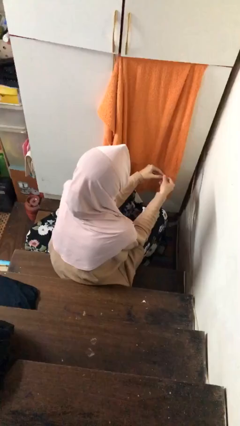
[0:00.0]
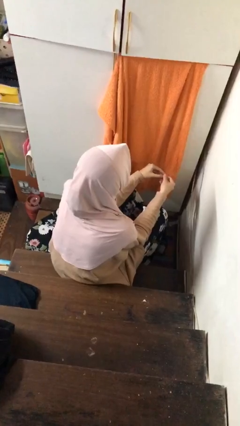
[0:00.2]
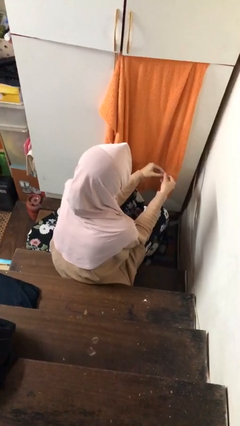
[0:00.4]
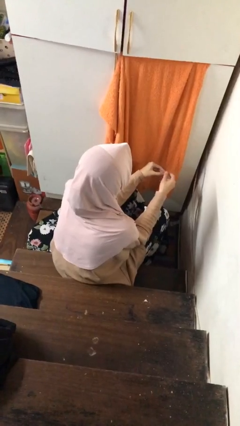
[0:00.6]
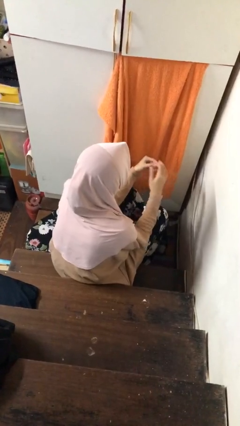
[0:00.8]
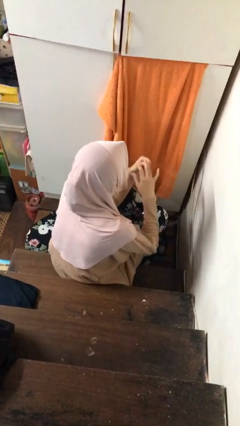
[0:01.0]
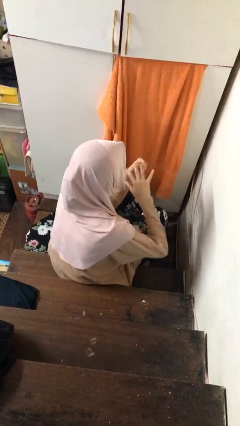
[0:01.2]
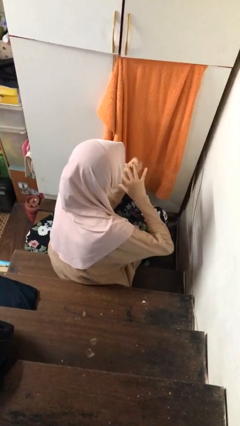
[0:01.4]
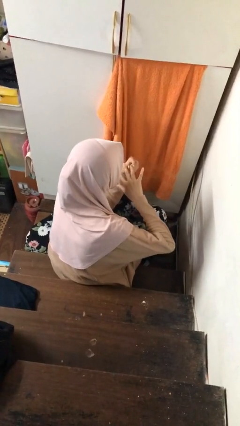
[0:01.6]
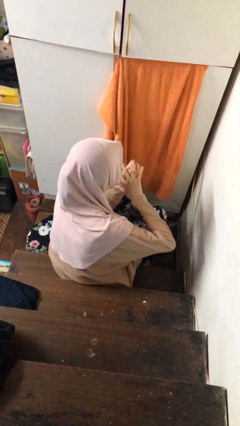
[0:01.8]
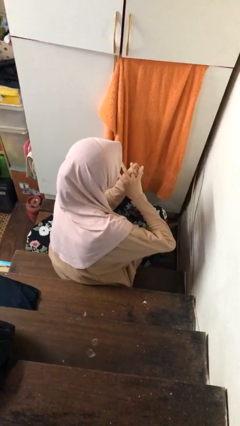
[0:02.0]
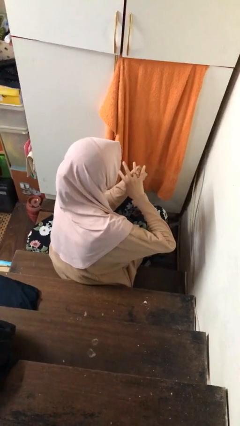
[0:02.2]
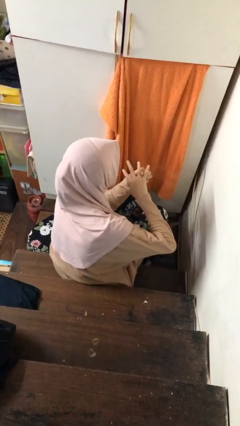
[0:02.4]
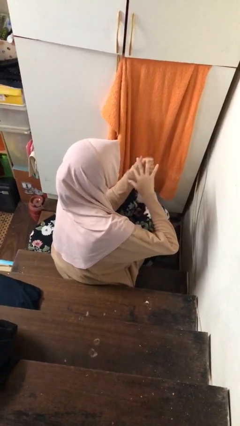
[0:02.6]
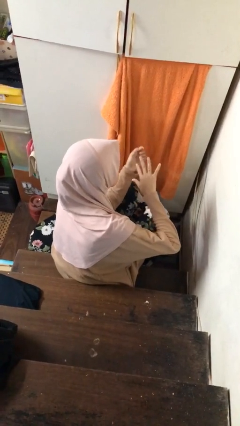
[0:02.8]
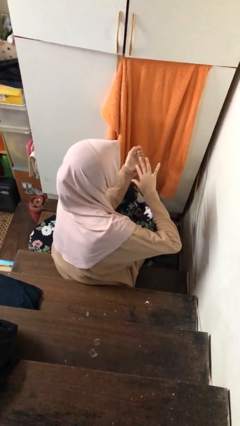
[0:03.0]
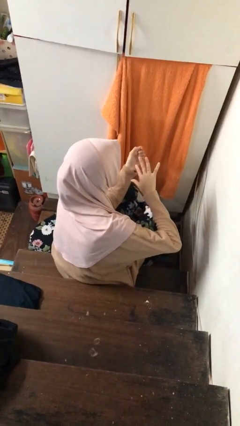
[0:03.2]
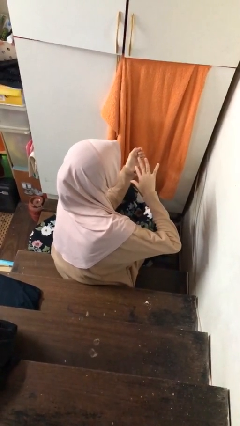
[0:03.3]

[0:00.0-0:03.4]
person puts on ring

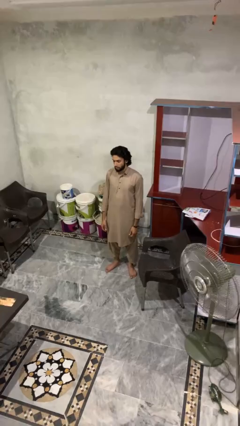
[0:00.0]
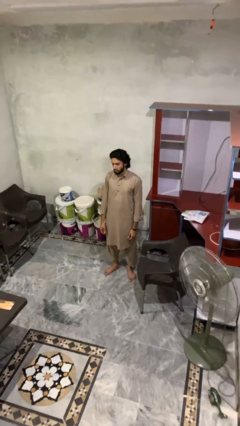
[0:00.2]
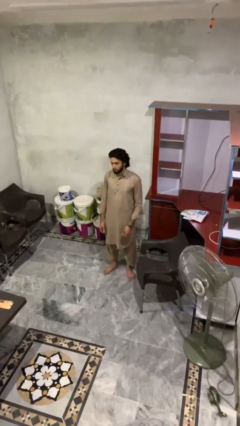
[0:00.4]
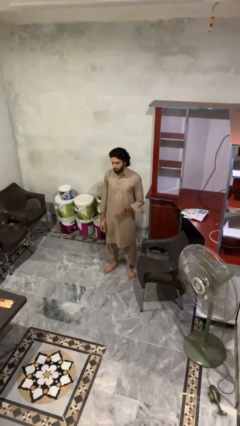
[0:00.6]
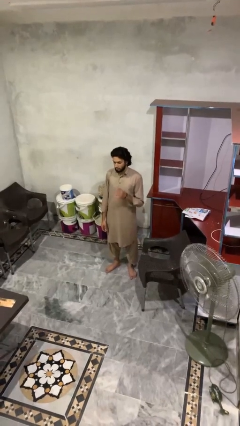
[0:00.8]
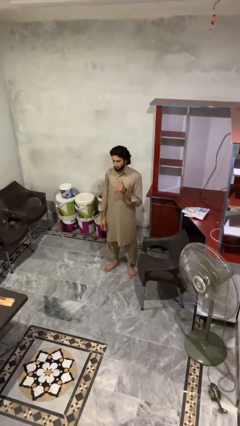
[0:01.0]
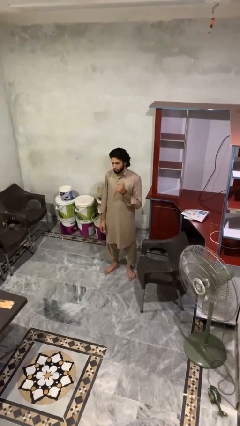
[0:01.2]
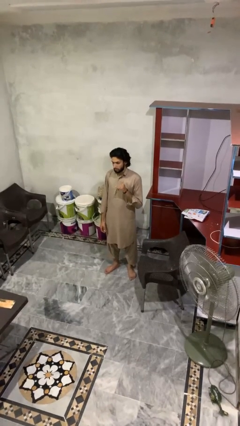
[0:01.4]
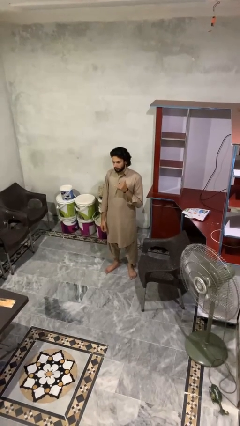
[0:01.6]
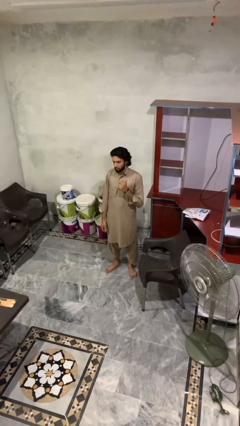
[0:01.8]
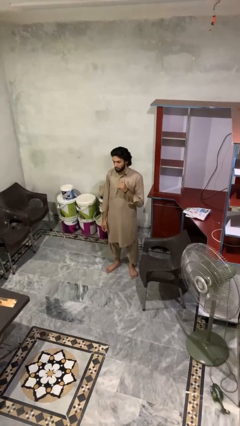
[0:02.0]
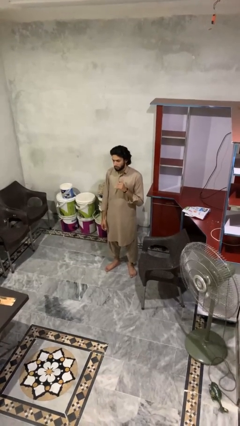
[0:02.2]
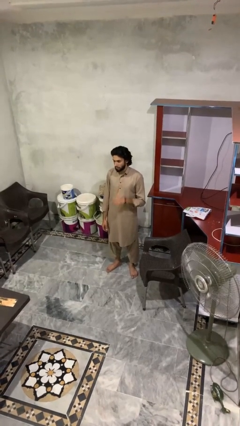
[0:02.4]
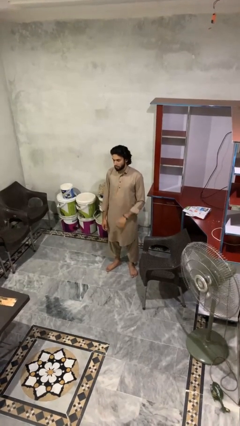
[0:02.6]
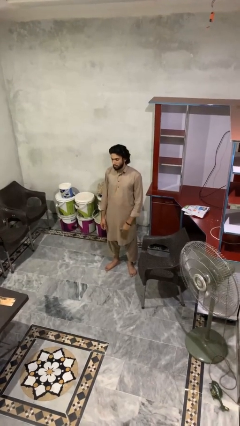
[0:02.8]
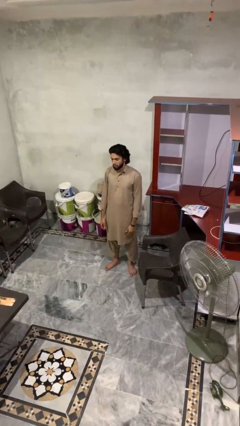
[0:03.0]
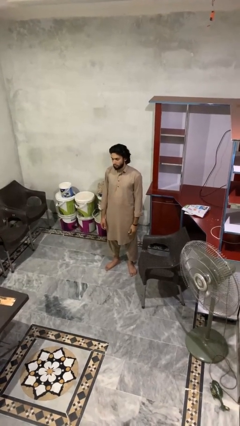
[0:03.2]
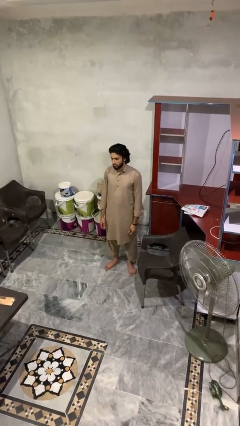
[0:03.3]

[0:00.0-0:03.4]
person gestures hang loose

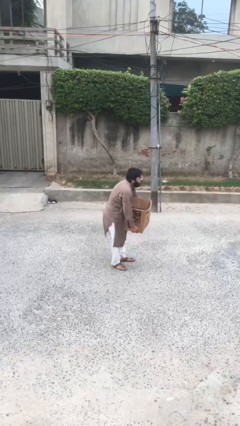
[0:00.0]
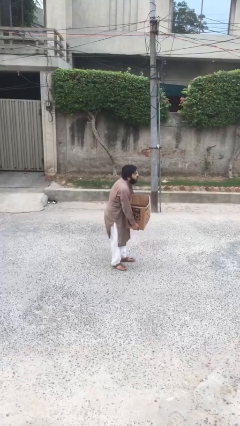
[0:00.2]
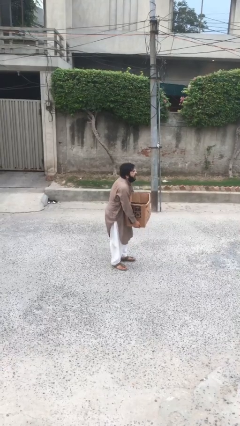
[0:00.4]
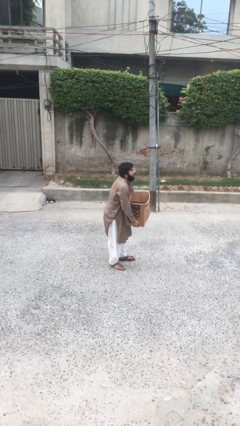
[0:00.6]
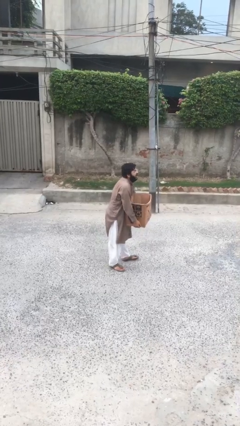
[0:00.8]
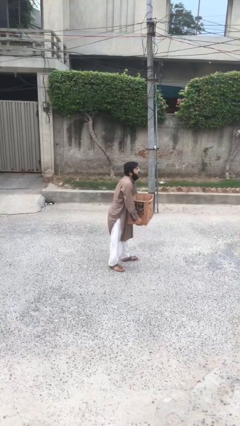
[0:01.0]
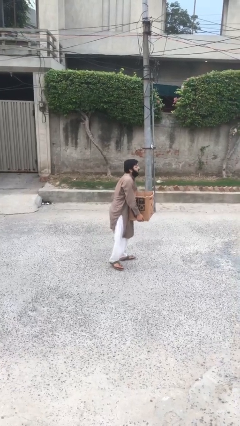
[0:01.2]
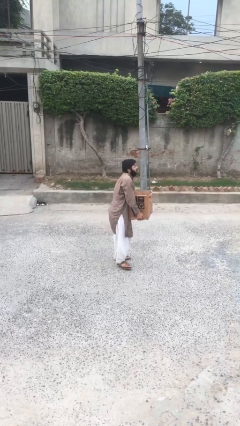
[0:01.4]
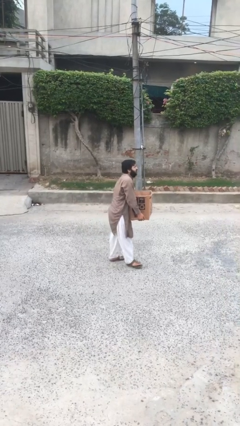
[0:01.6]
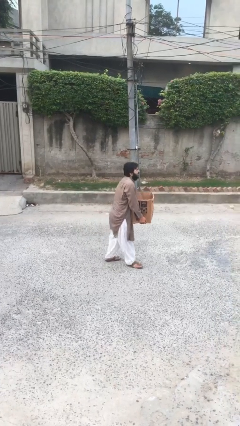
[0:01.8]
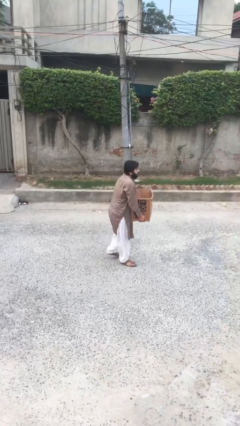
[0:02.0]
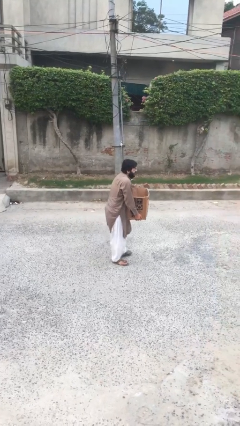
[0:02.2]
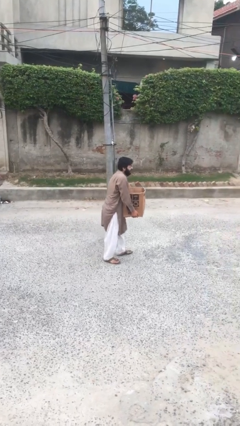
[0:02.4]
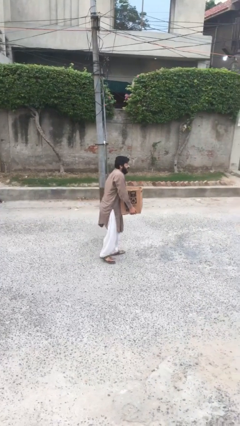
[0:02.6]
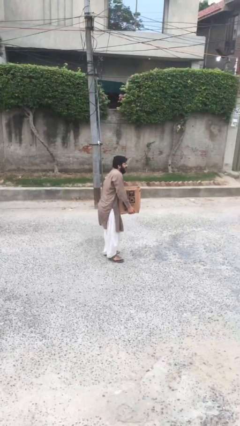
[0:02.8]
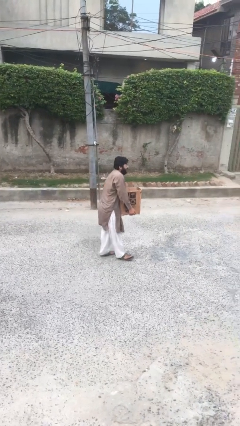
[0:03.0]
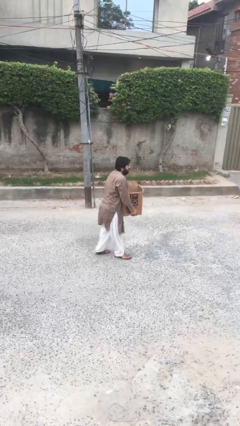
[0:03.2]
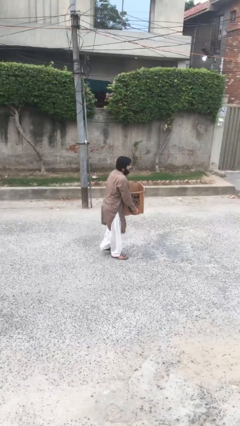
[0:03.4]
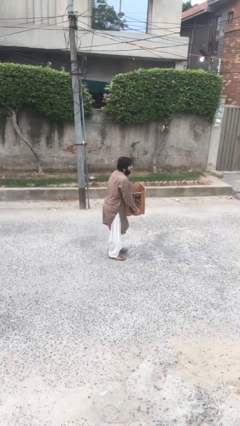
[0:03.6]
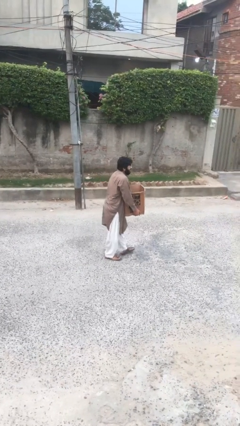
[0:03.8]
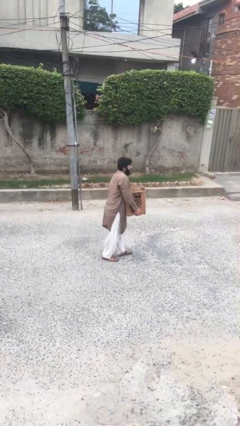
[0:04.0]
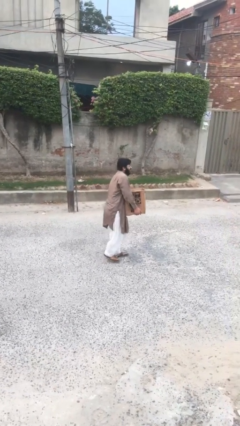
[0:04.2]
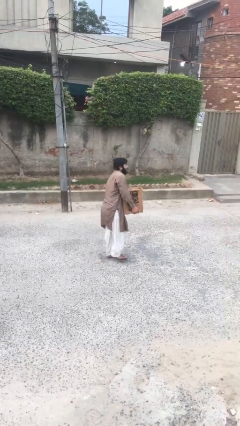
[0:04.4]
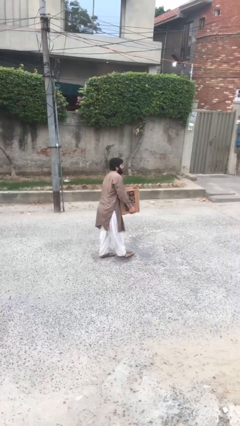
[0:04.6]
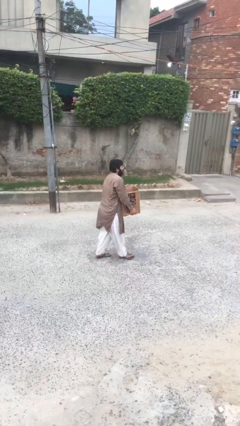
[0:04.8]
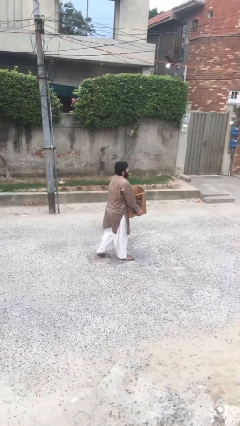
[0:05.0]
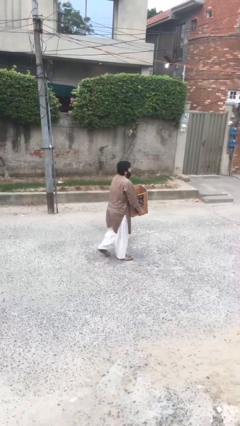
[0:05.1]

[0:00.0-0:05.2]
person carries heavy object

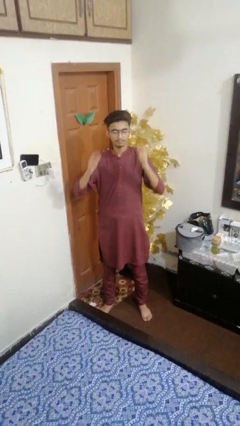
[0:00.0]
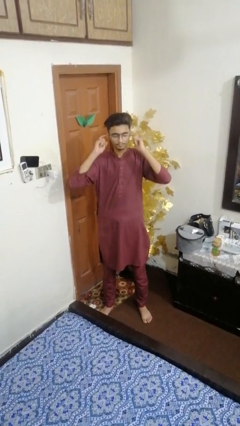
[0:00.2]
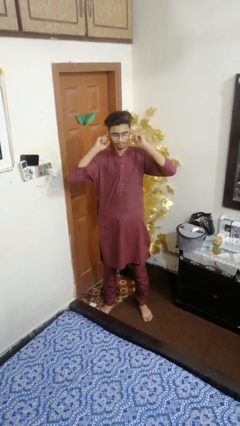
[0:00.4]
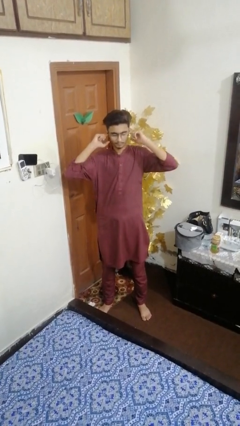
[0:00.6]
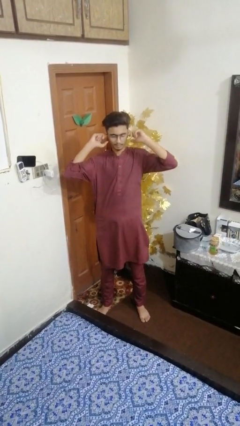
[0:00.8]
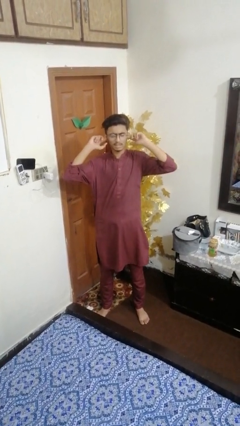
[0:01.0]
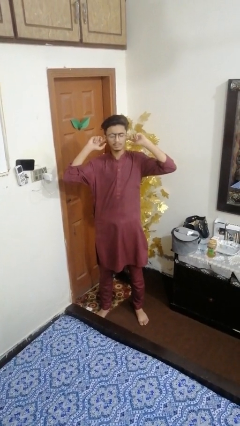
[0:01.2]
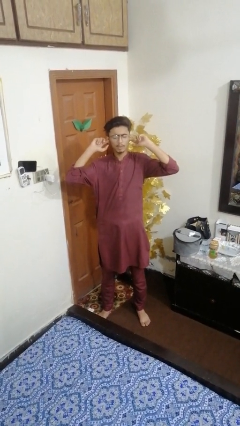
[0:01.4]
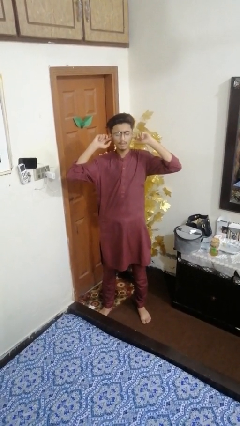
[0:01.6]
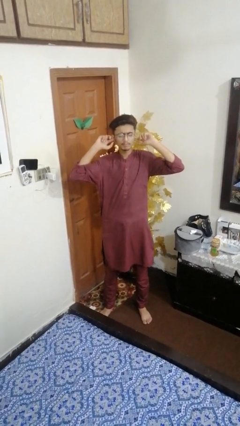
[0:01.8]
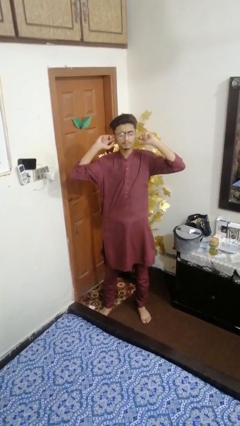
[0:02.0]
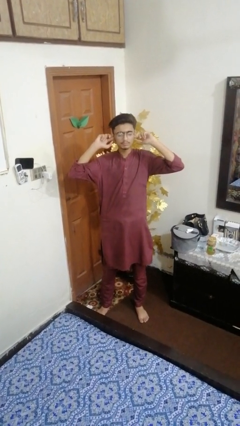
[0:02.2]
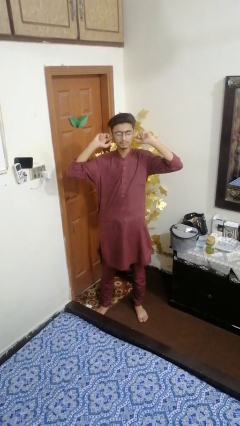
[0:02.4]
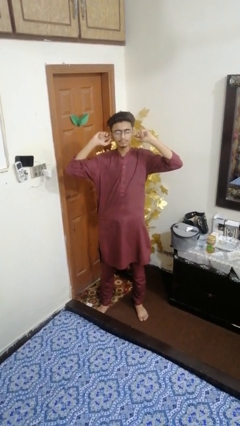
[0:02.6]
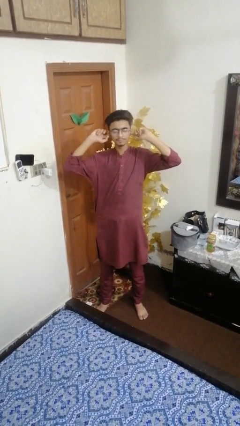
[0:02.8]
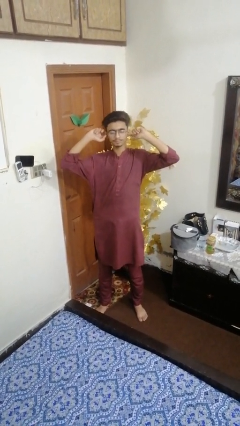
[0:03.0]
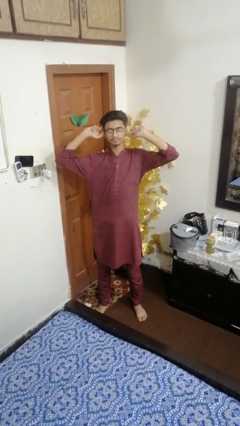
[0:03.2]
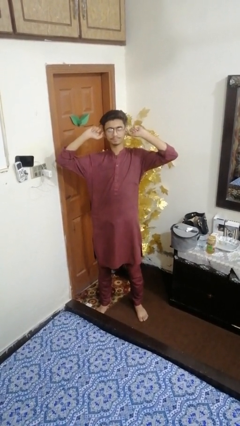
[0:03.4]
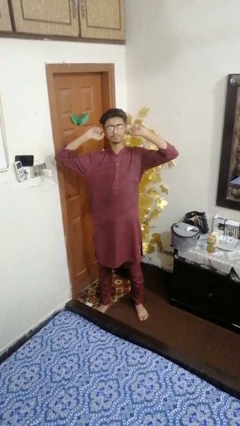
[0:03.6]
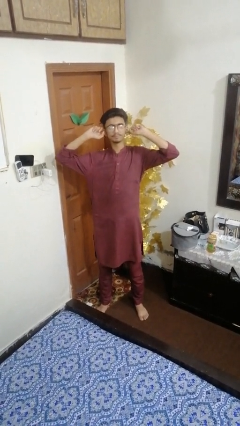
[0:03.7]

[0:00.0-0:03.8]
person puts fingers in ear

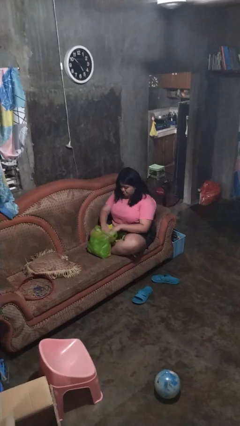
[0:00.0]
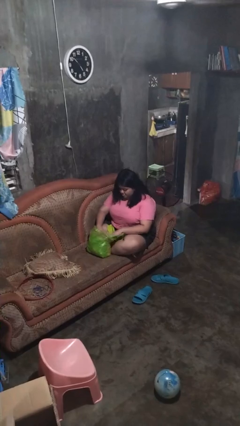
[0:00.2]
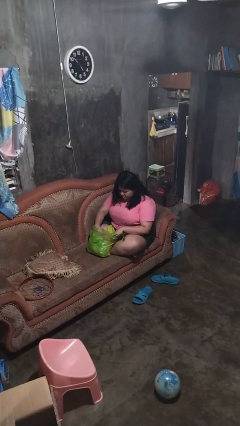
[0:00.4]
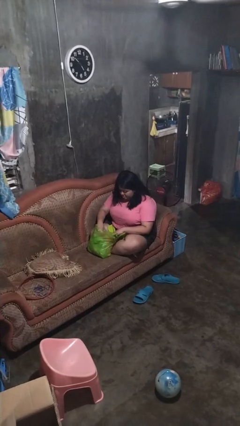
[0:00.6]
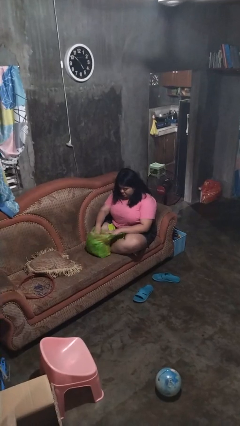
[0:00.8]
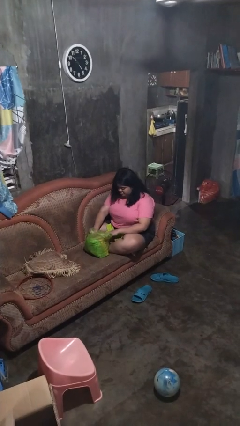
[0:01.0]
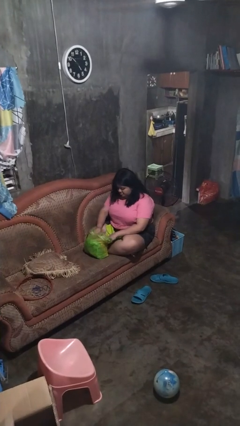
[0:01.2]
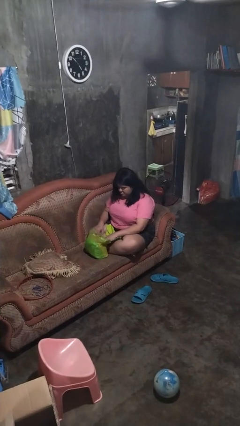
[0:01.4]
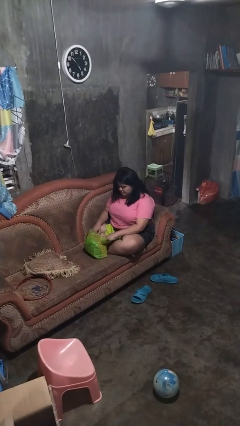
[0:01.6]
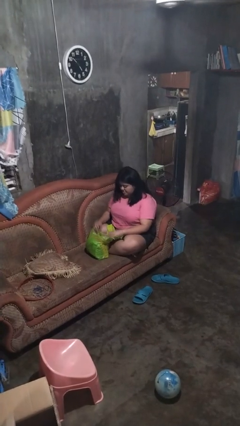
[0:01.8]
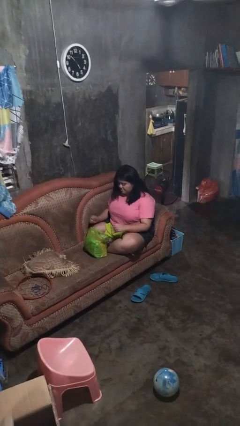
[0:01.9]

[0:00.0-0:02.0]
person searches in bag
